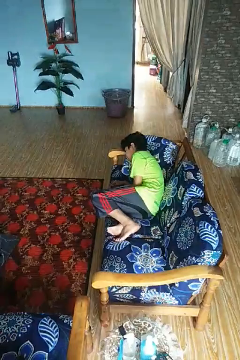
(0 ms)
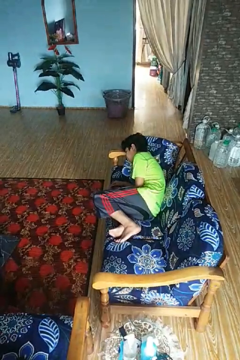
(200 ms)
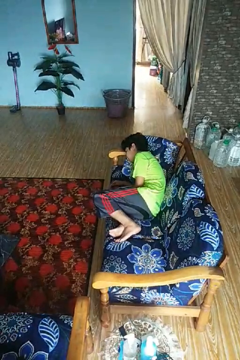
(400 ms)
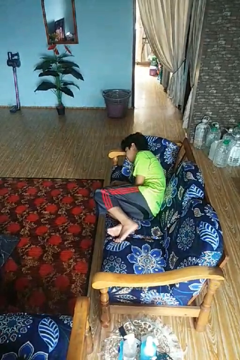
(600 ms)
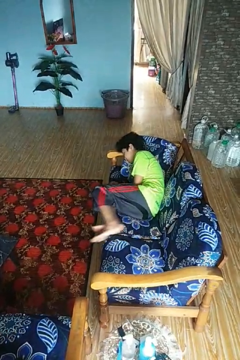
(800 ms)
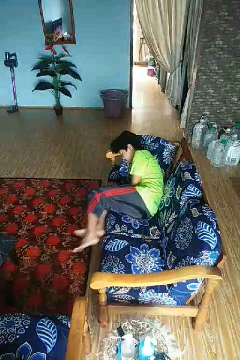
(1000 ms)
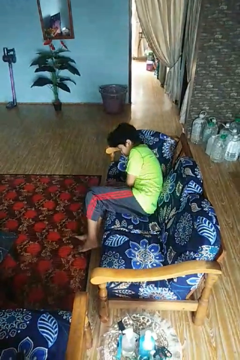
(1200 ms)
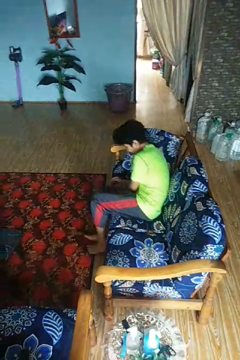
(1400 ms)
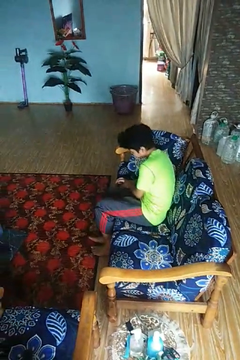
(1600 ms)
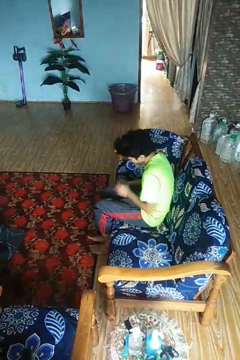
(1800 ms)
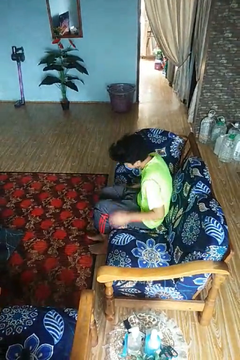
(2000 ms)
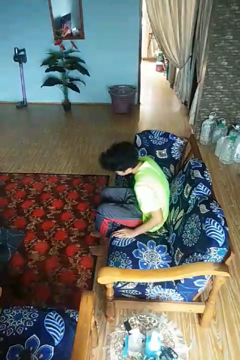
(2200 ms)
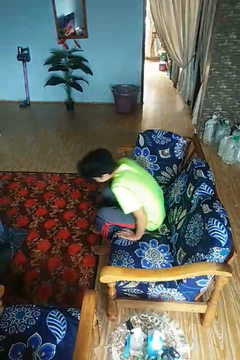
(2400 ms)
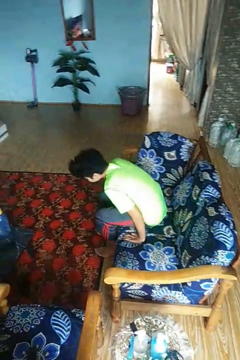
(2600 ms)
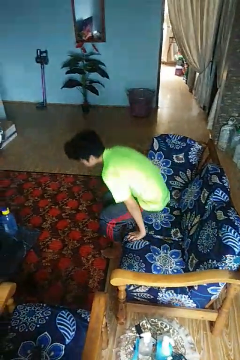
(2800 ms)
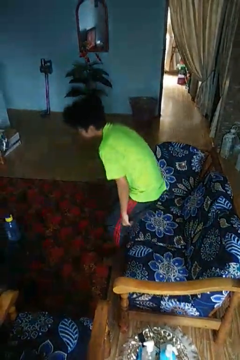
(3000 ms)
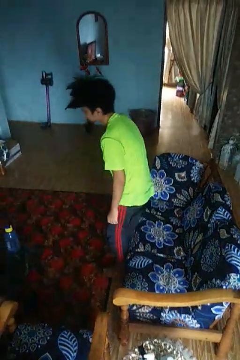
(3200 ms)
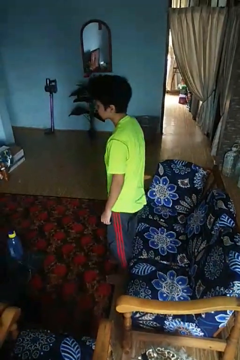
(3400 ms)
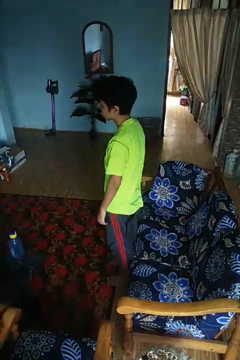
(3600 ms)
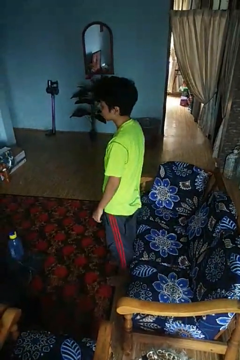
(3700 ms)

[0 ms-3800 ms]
person stands up

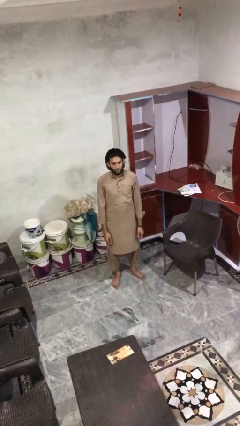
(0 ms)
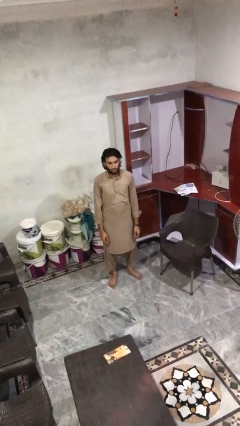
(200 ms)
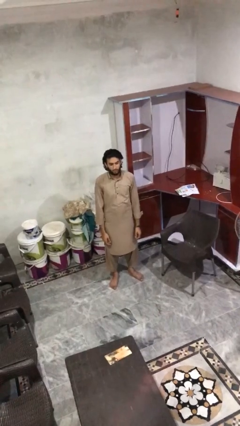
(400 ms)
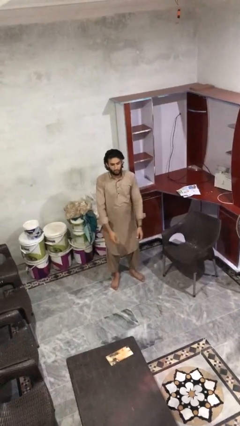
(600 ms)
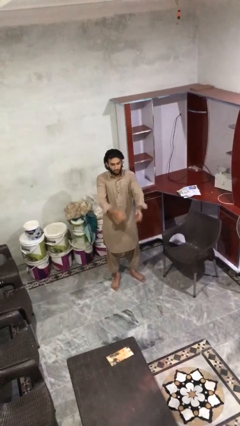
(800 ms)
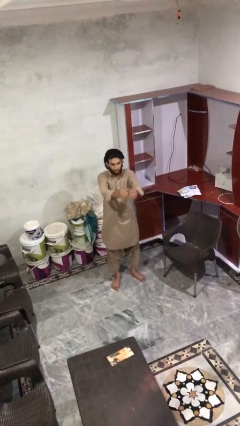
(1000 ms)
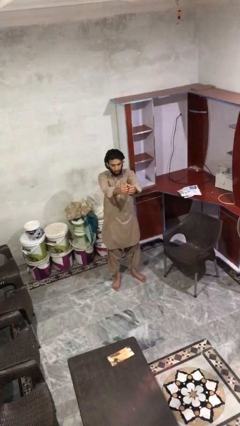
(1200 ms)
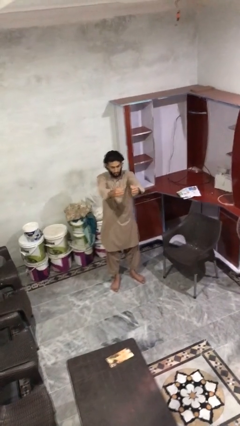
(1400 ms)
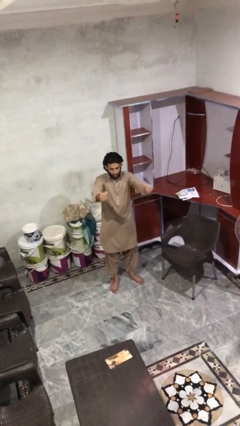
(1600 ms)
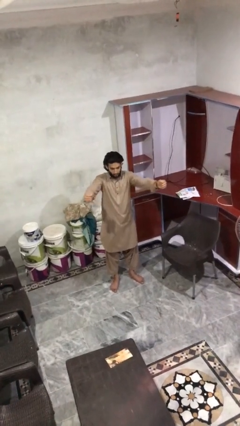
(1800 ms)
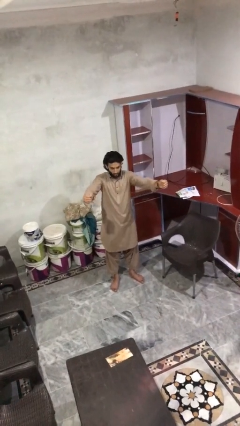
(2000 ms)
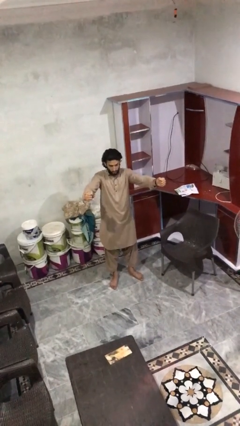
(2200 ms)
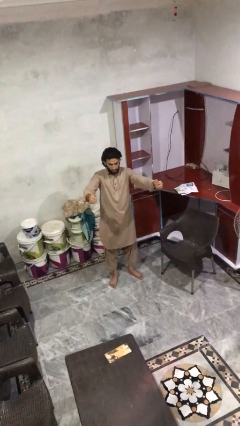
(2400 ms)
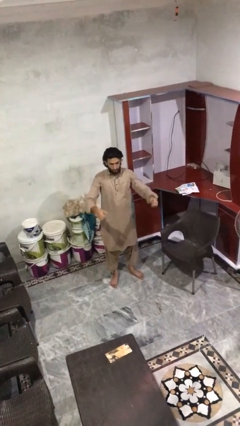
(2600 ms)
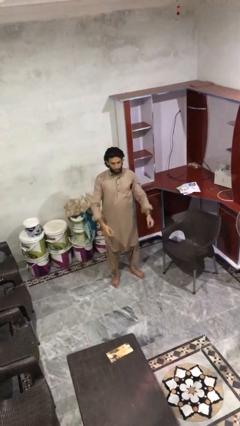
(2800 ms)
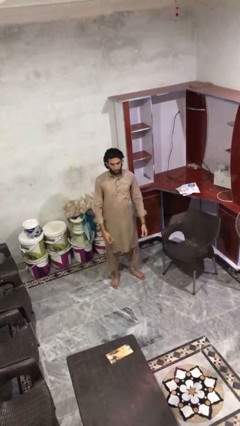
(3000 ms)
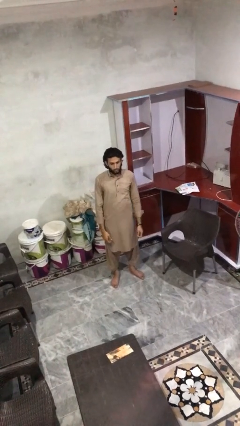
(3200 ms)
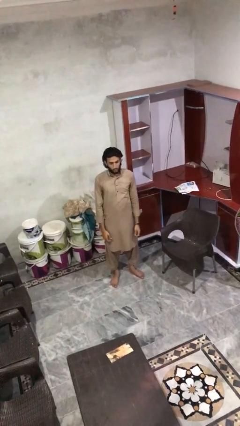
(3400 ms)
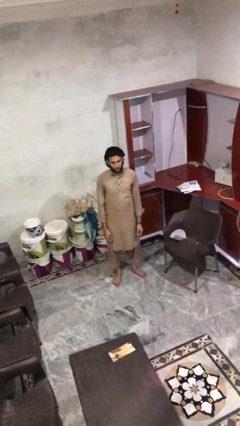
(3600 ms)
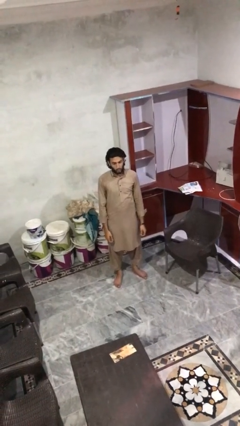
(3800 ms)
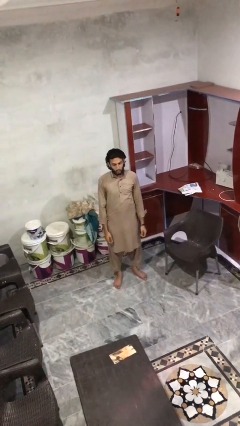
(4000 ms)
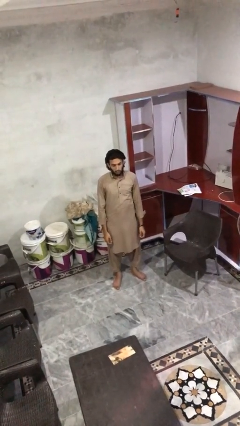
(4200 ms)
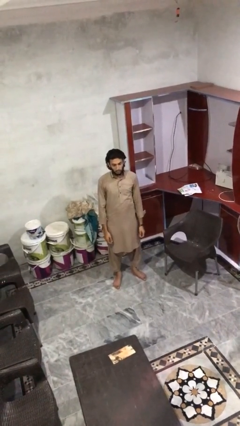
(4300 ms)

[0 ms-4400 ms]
person gestures zoom in

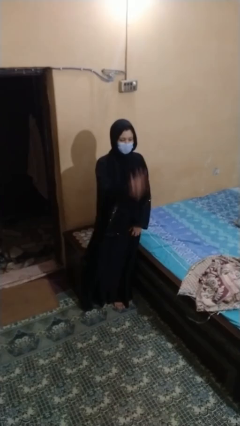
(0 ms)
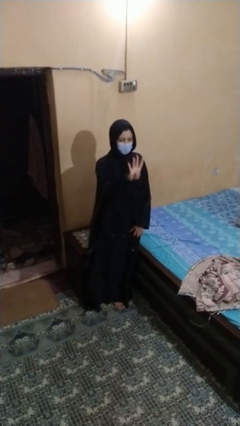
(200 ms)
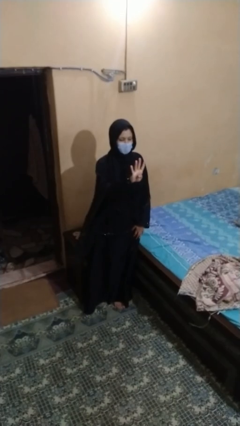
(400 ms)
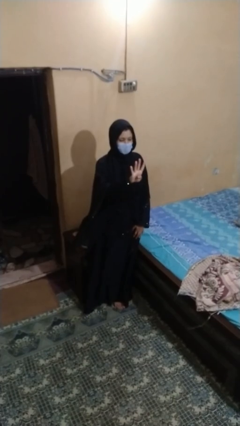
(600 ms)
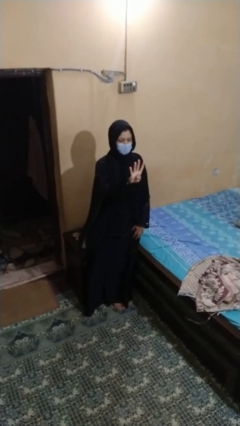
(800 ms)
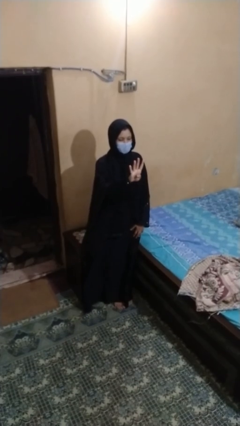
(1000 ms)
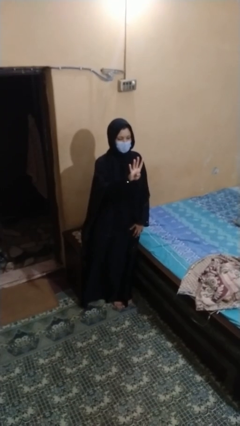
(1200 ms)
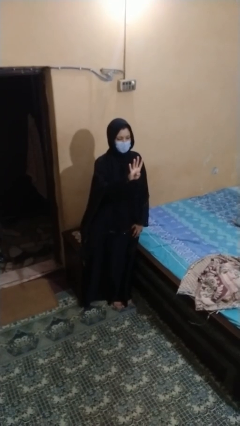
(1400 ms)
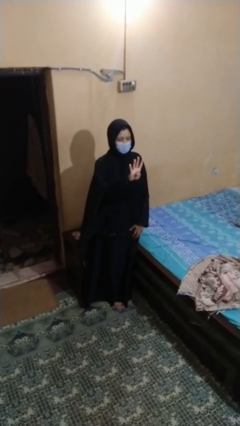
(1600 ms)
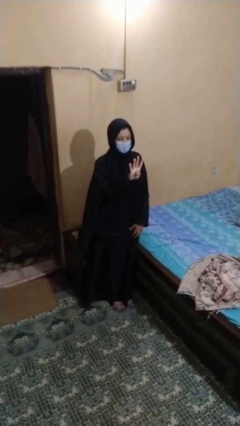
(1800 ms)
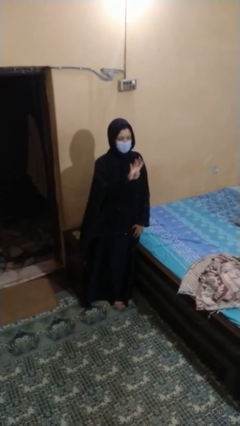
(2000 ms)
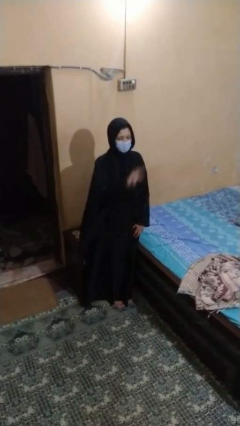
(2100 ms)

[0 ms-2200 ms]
person gestures number four

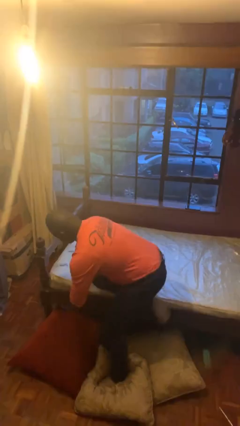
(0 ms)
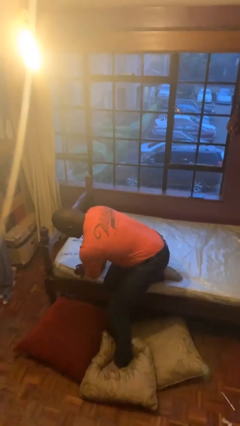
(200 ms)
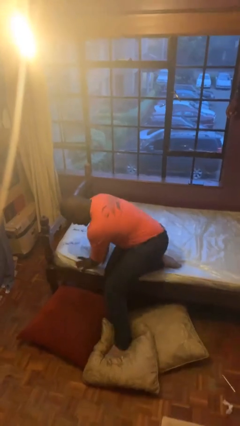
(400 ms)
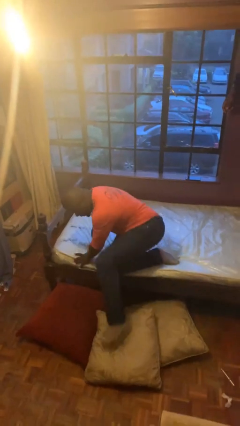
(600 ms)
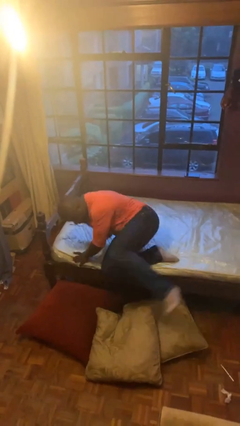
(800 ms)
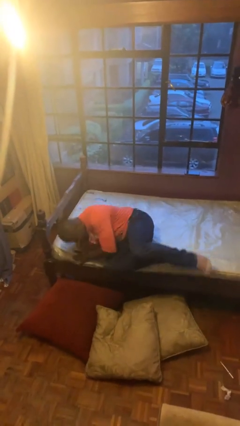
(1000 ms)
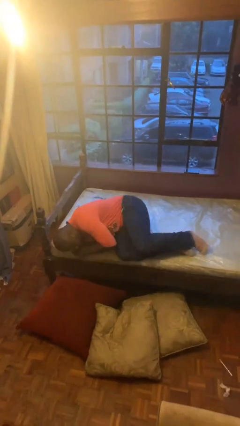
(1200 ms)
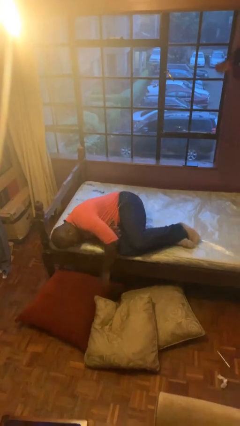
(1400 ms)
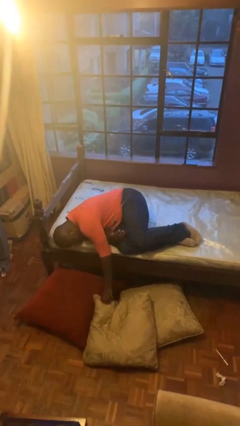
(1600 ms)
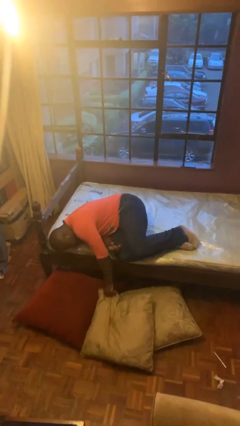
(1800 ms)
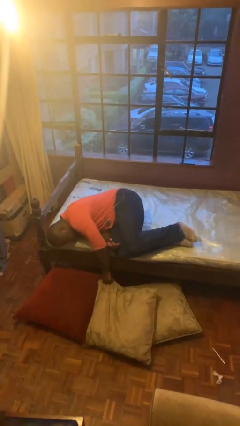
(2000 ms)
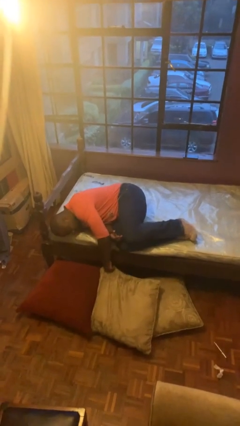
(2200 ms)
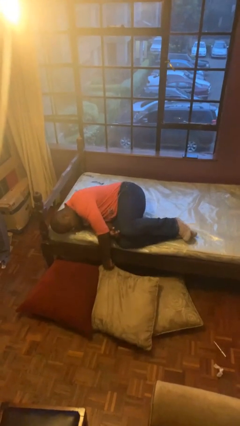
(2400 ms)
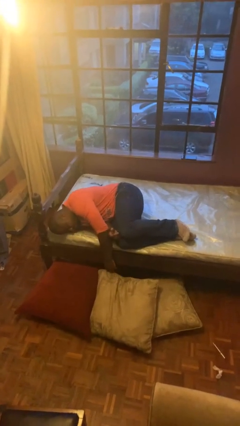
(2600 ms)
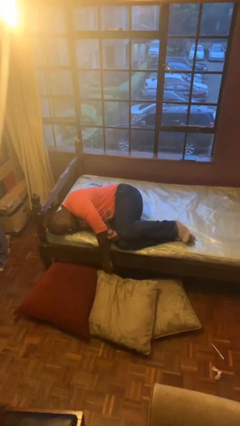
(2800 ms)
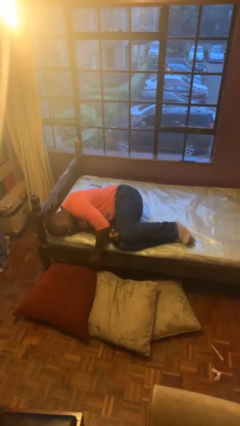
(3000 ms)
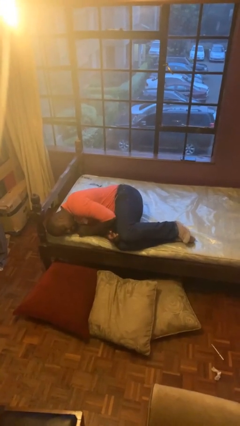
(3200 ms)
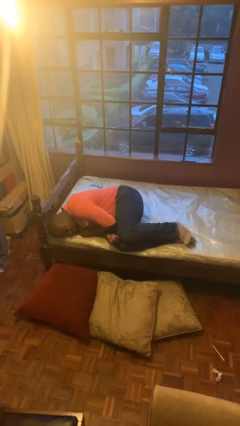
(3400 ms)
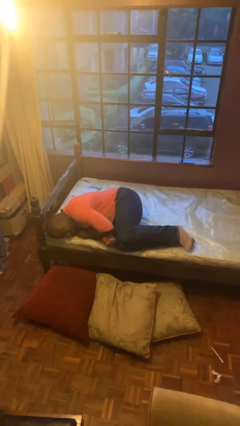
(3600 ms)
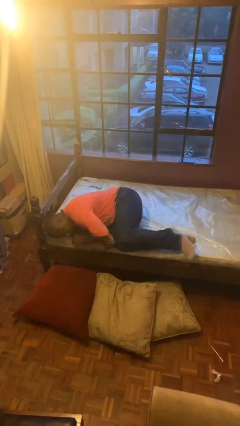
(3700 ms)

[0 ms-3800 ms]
person lies down on bed

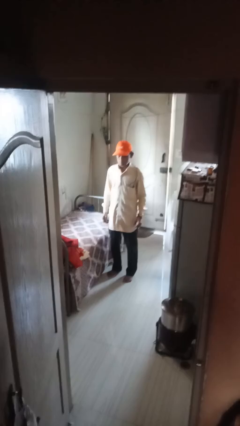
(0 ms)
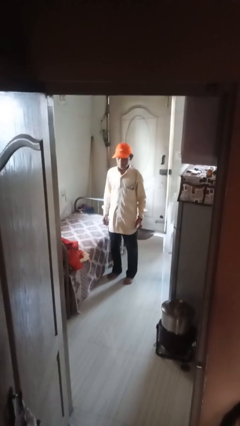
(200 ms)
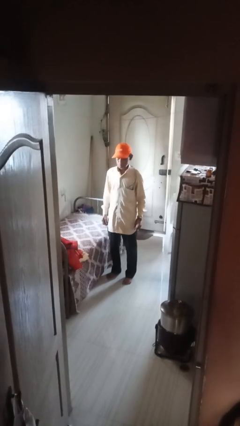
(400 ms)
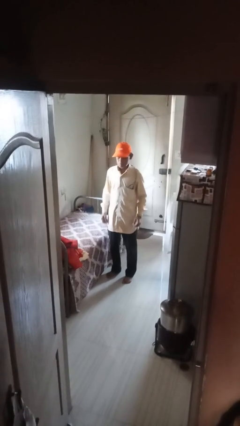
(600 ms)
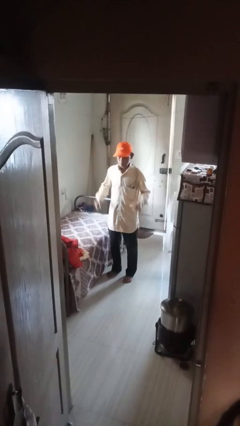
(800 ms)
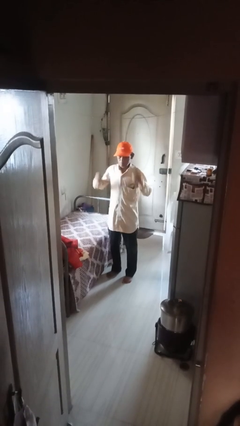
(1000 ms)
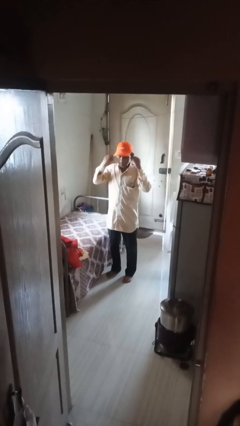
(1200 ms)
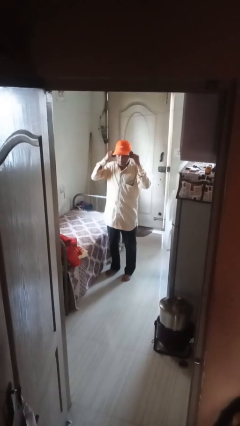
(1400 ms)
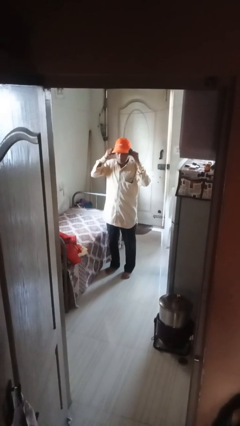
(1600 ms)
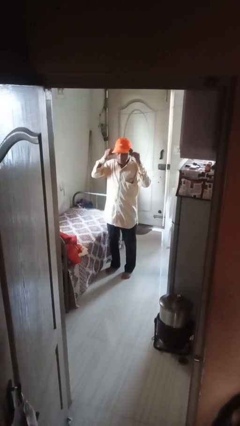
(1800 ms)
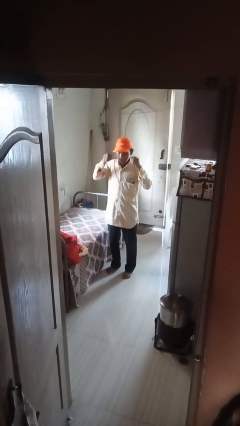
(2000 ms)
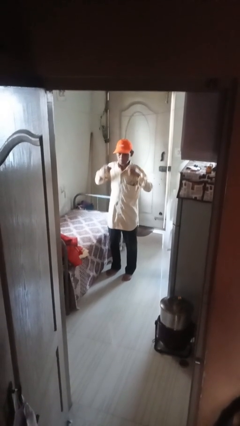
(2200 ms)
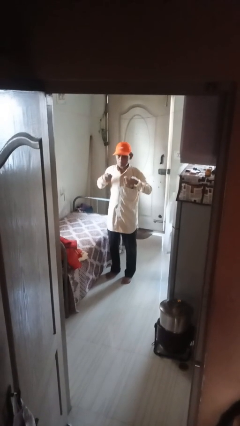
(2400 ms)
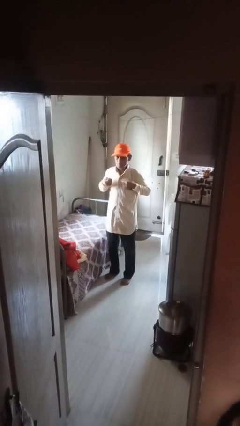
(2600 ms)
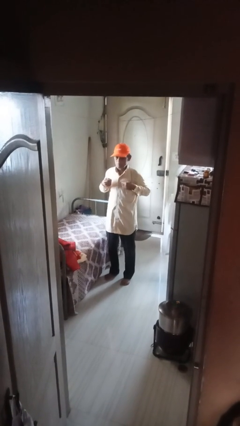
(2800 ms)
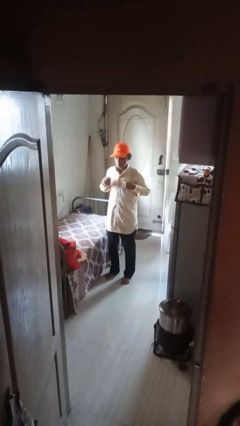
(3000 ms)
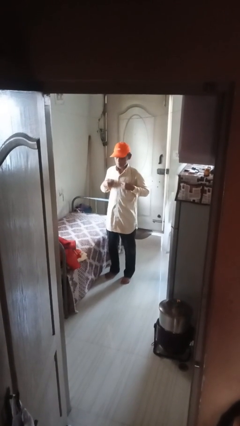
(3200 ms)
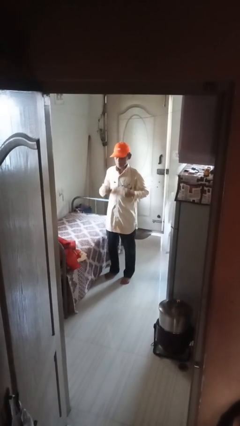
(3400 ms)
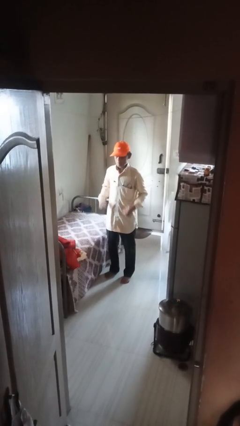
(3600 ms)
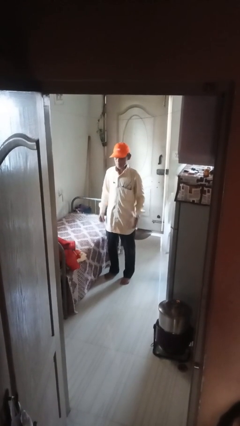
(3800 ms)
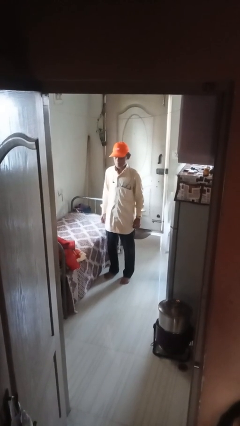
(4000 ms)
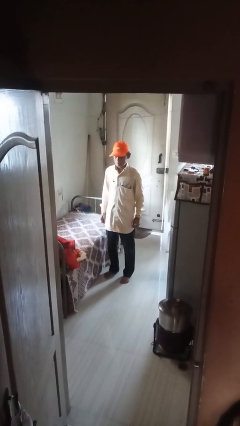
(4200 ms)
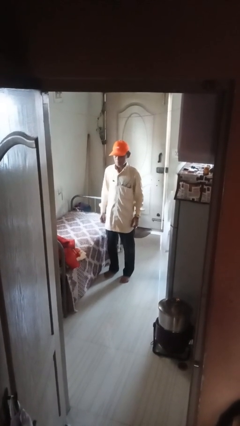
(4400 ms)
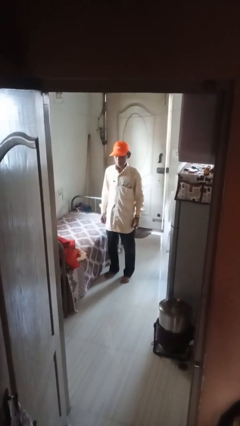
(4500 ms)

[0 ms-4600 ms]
person takes off headphones
